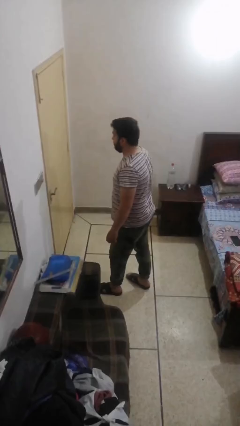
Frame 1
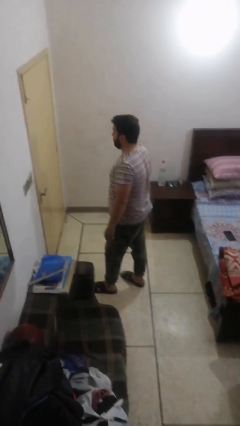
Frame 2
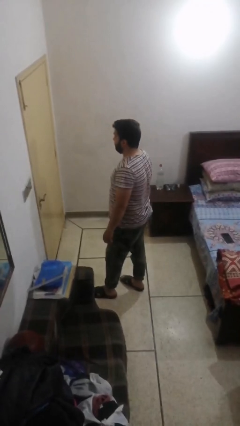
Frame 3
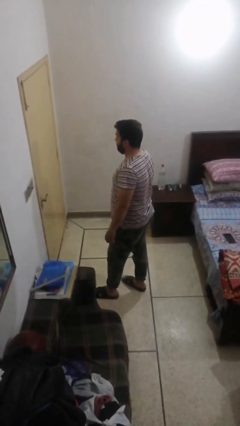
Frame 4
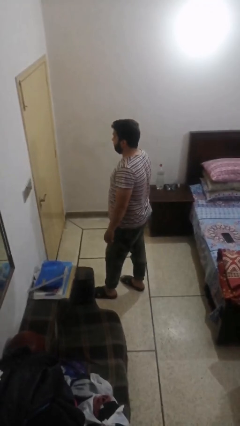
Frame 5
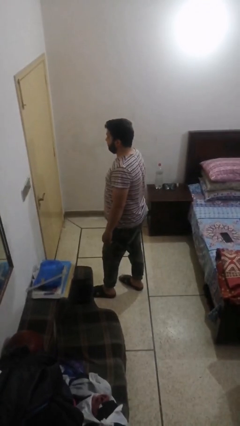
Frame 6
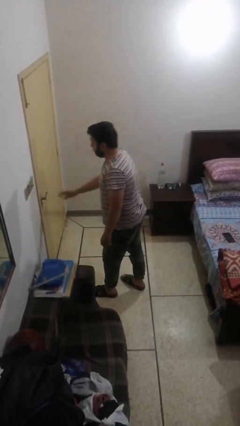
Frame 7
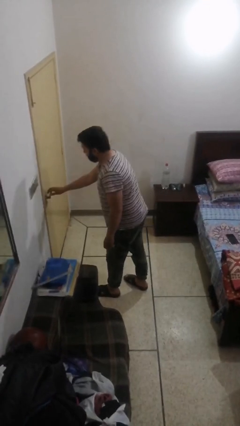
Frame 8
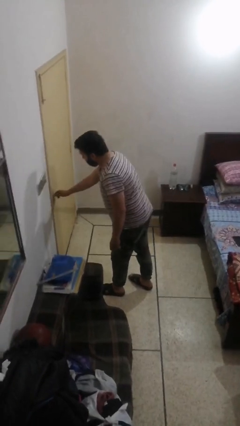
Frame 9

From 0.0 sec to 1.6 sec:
person opens facility door

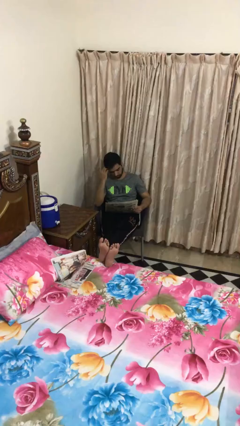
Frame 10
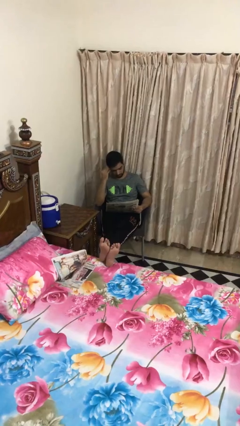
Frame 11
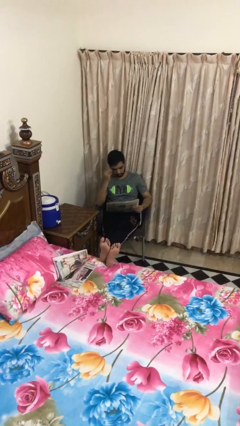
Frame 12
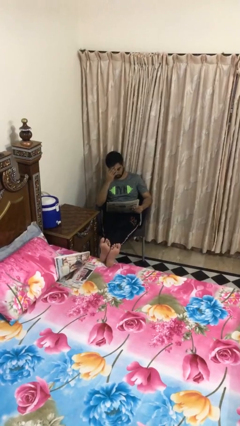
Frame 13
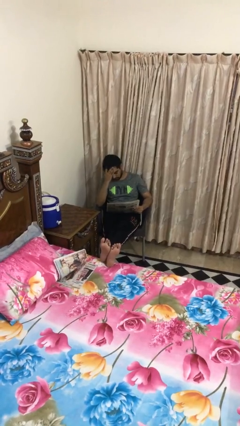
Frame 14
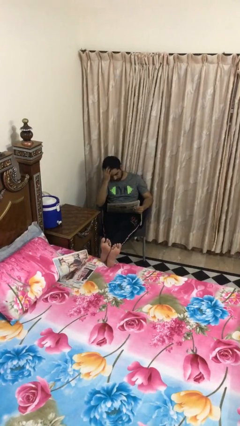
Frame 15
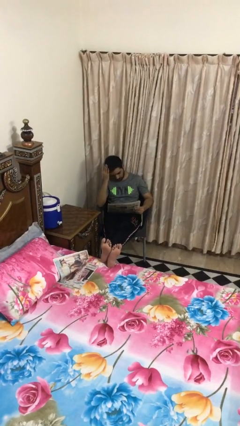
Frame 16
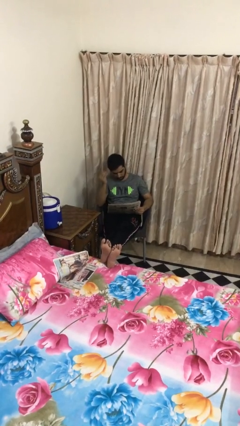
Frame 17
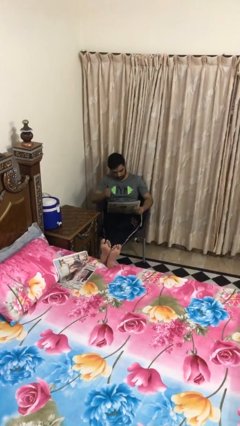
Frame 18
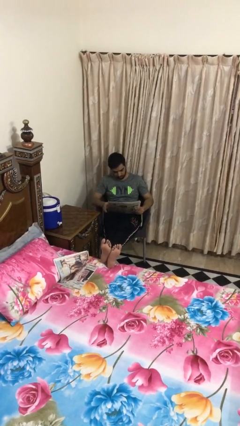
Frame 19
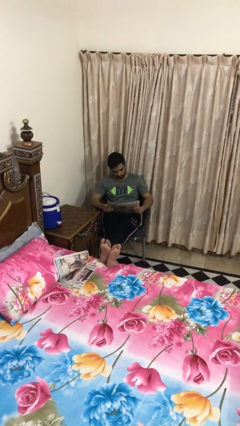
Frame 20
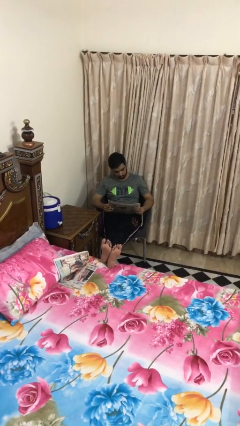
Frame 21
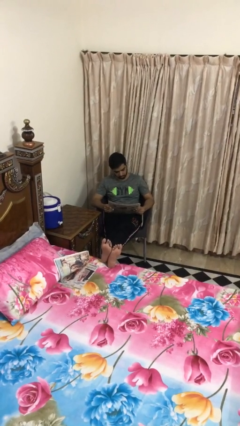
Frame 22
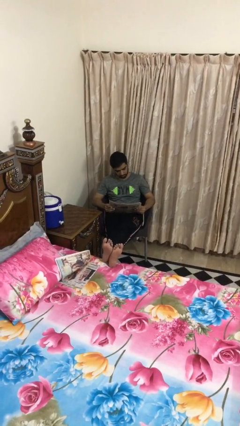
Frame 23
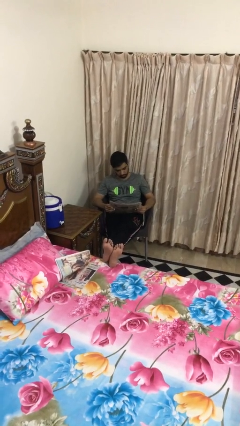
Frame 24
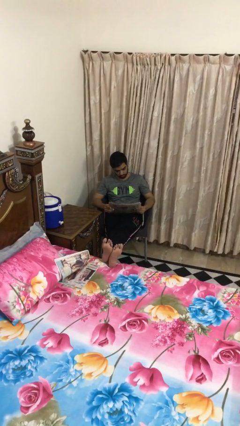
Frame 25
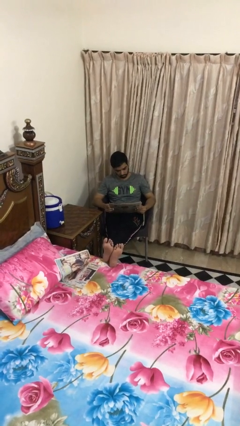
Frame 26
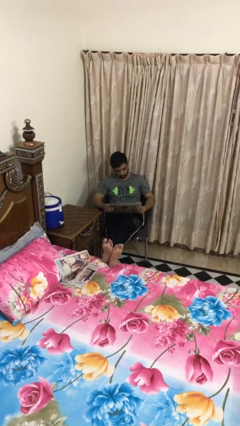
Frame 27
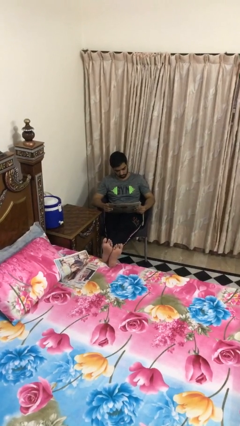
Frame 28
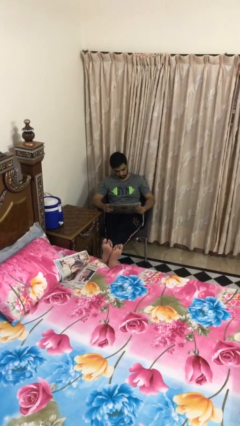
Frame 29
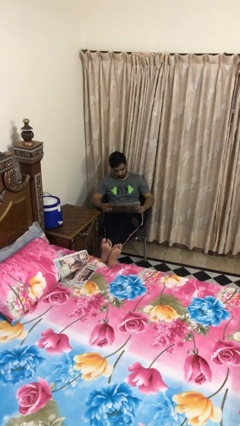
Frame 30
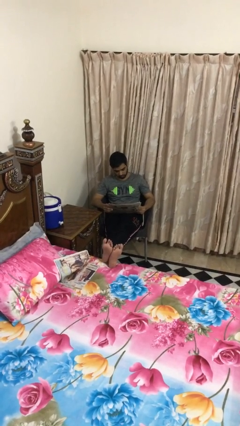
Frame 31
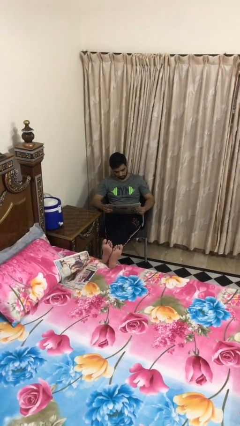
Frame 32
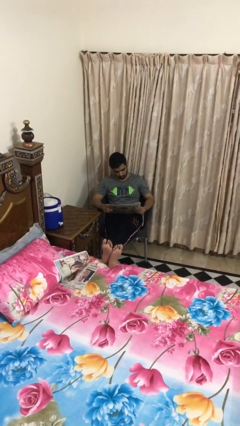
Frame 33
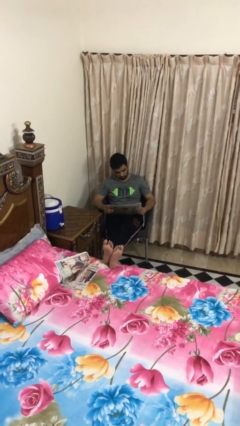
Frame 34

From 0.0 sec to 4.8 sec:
person reads document

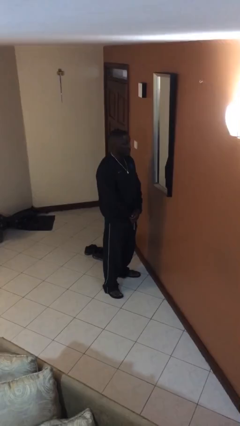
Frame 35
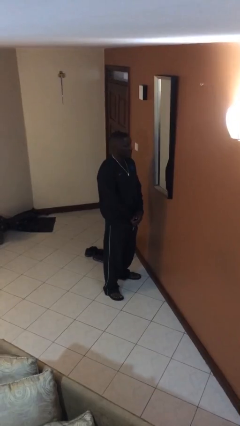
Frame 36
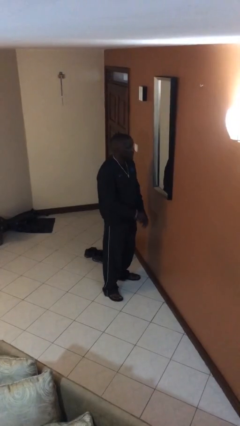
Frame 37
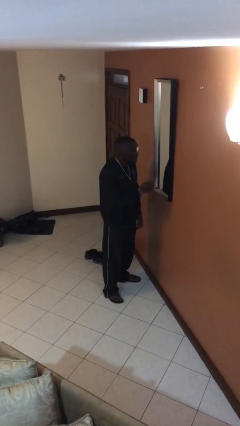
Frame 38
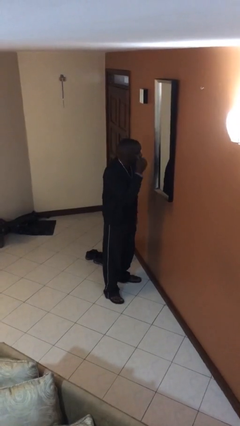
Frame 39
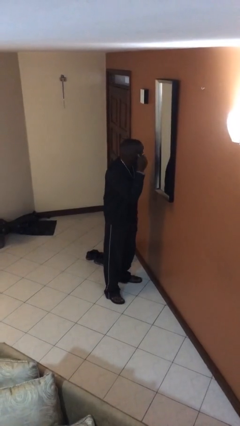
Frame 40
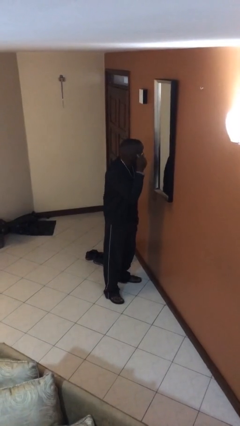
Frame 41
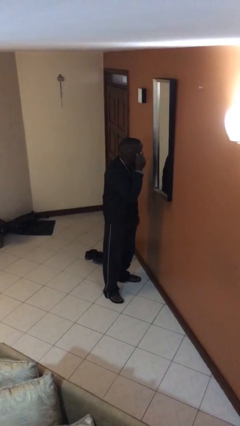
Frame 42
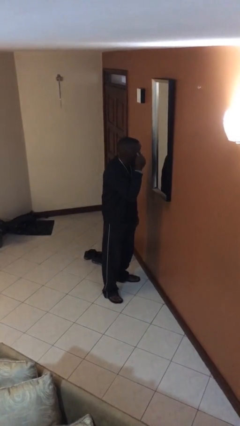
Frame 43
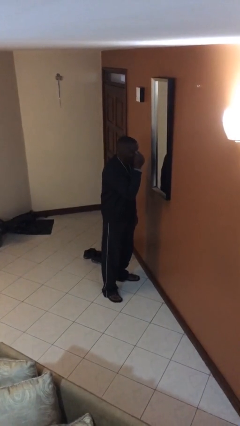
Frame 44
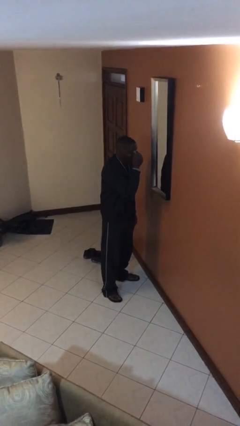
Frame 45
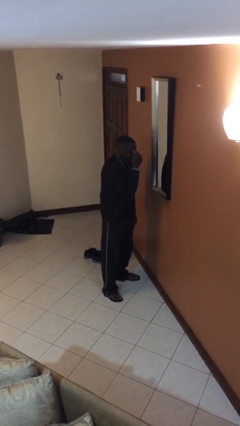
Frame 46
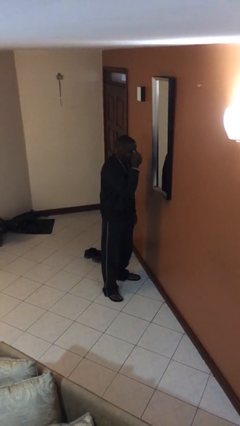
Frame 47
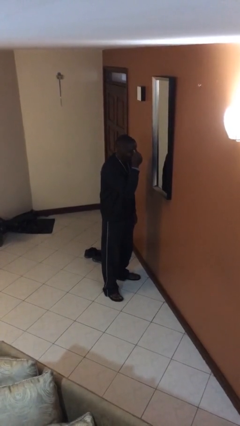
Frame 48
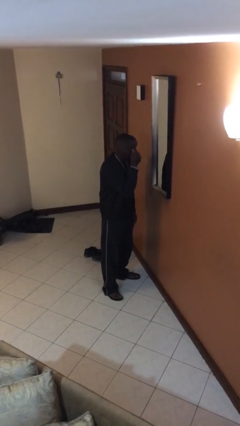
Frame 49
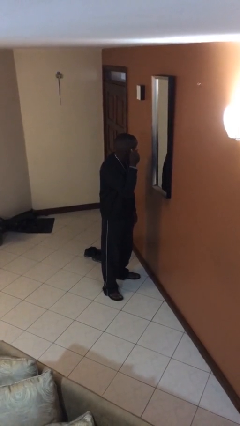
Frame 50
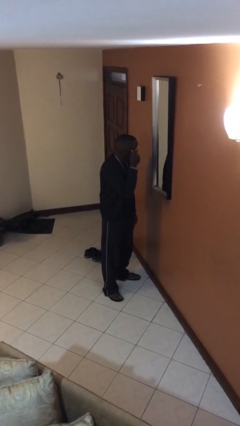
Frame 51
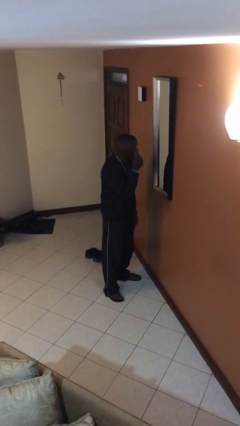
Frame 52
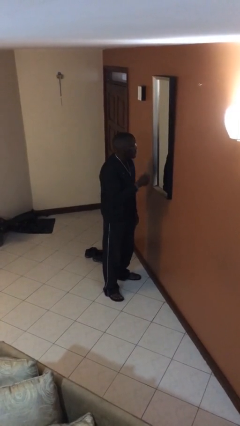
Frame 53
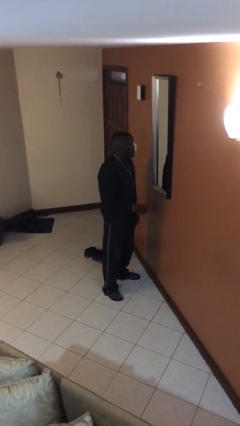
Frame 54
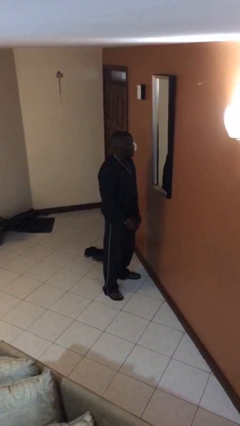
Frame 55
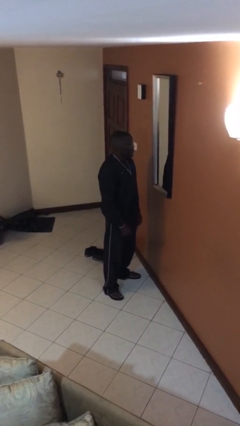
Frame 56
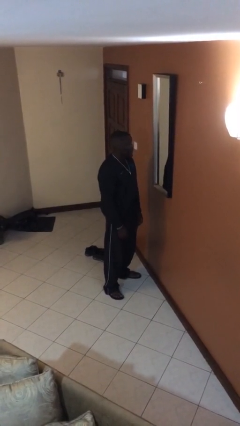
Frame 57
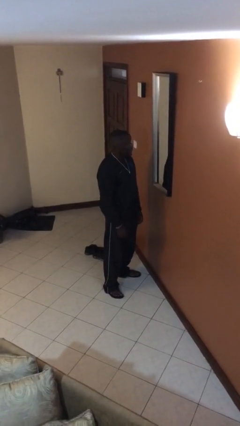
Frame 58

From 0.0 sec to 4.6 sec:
person applies eye makeup

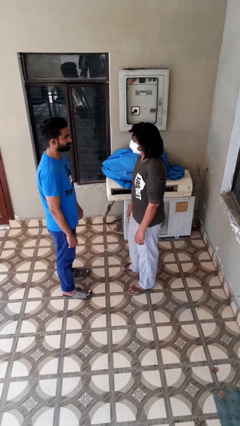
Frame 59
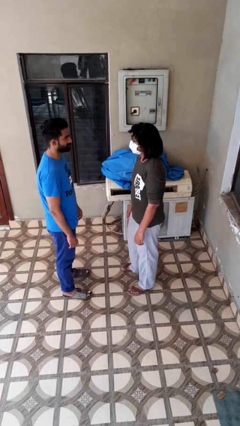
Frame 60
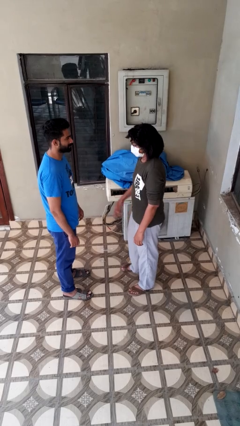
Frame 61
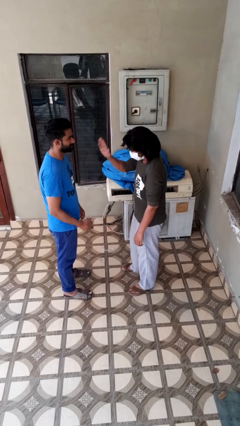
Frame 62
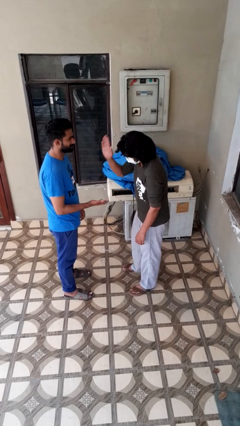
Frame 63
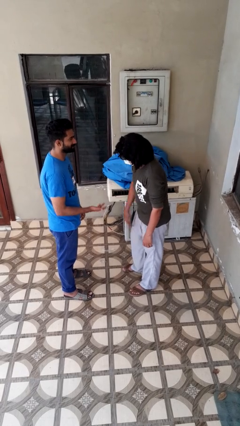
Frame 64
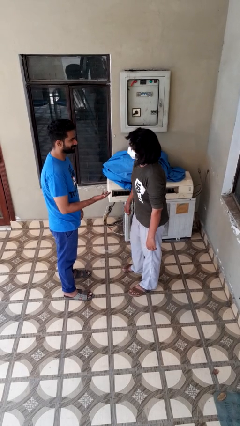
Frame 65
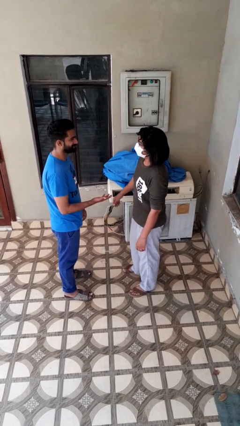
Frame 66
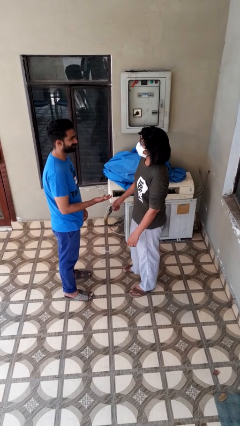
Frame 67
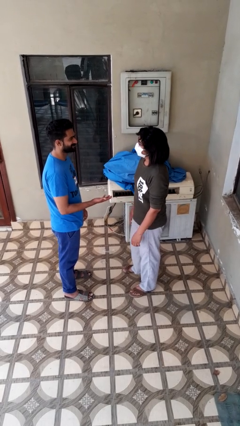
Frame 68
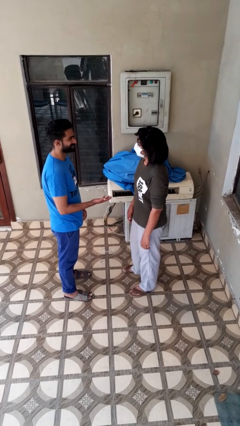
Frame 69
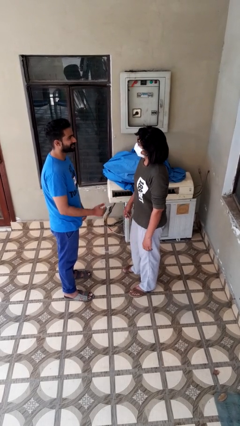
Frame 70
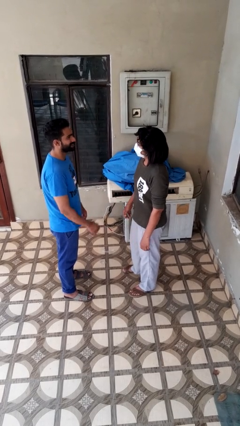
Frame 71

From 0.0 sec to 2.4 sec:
person highfives hand

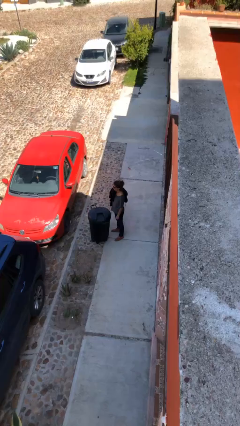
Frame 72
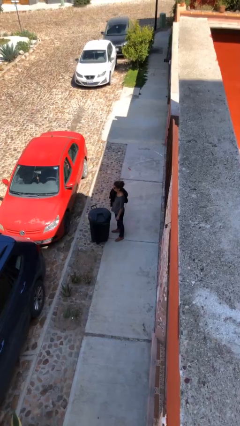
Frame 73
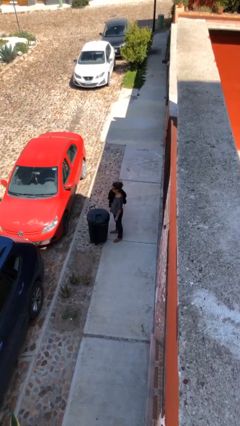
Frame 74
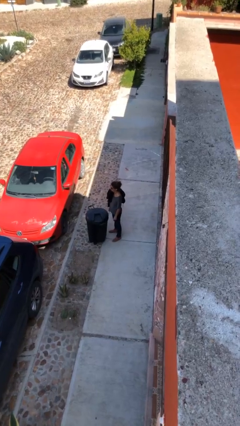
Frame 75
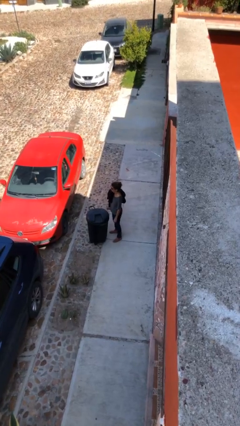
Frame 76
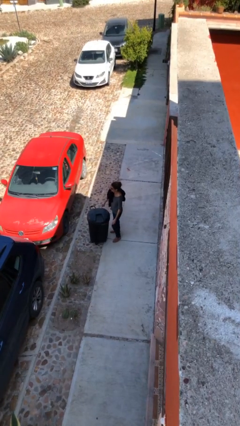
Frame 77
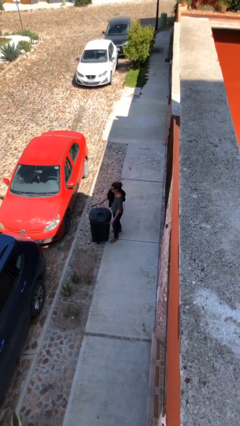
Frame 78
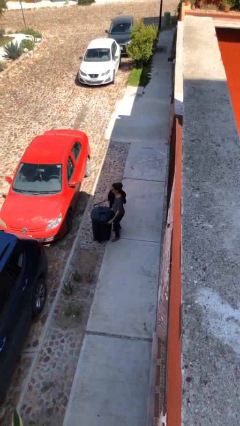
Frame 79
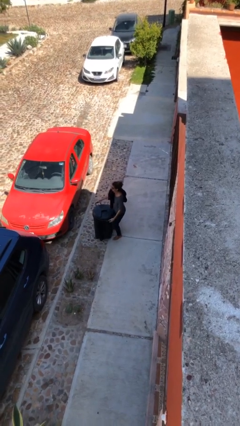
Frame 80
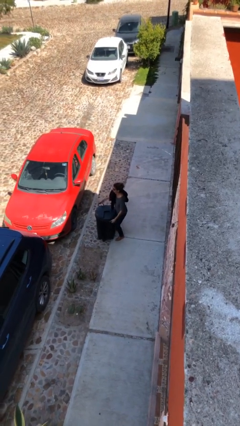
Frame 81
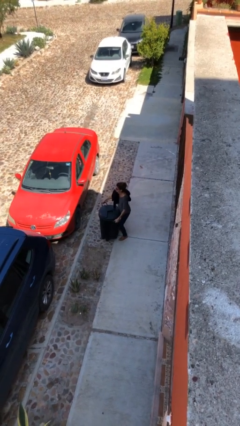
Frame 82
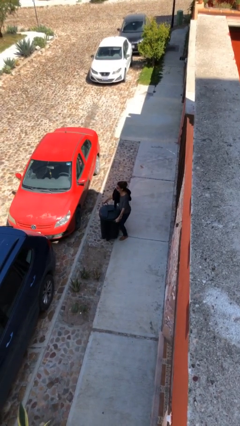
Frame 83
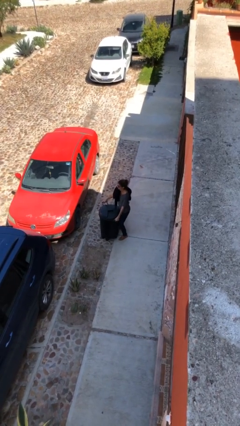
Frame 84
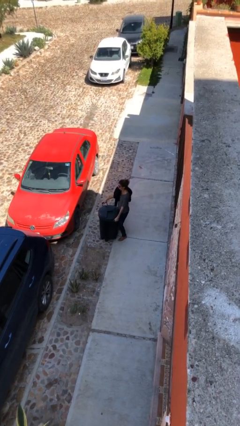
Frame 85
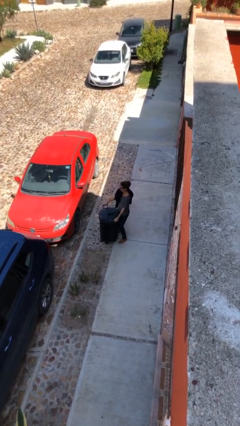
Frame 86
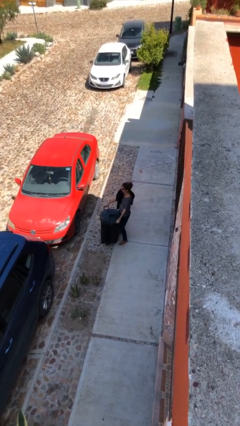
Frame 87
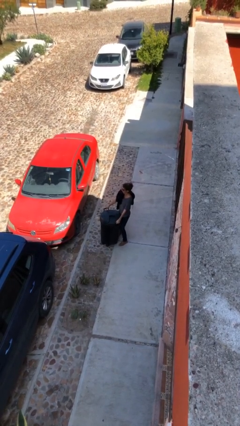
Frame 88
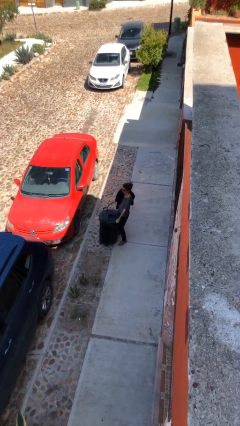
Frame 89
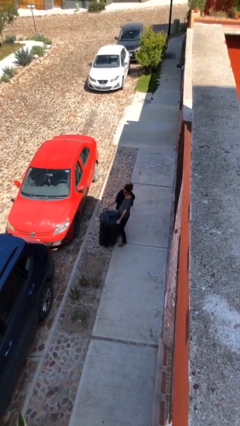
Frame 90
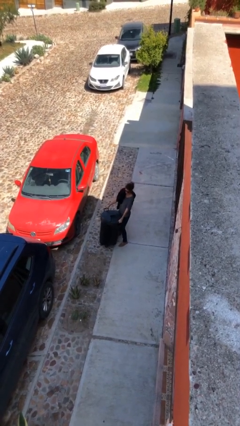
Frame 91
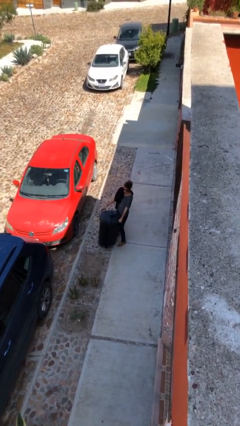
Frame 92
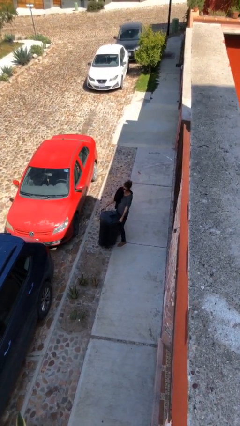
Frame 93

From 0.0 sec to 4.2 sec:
person picks up object from floor
